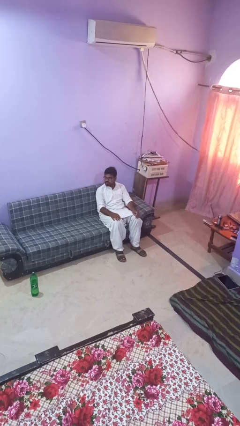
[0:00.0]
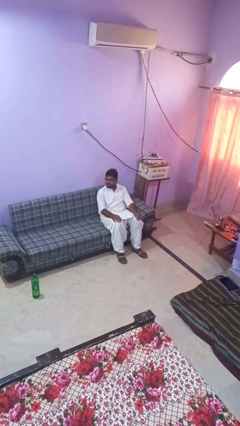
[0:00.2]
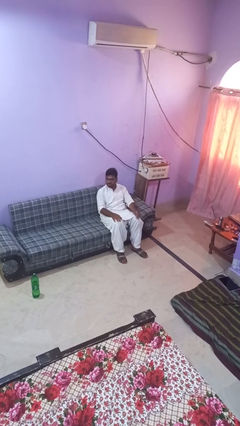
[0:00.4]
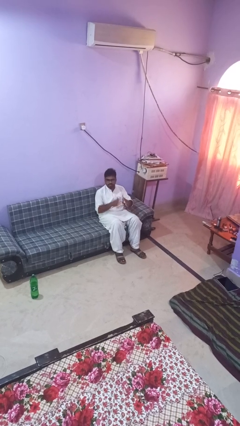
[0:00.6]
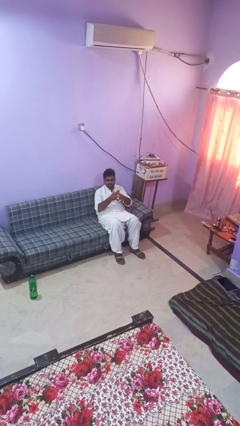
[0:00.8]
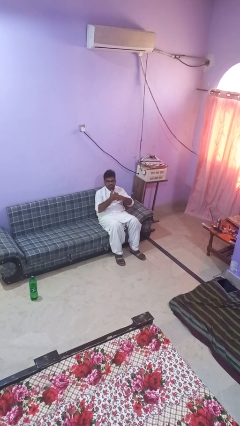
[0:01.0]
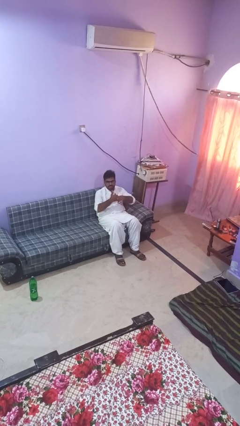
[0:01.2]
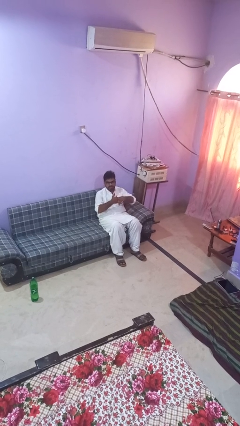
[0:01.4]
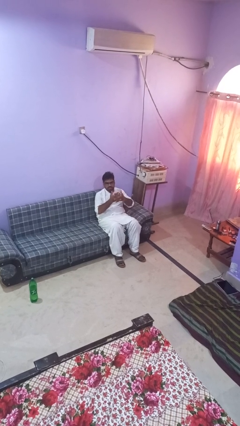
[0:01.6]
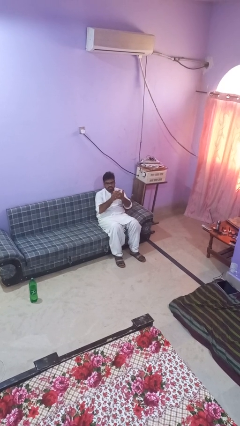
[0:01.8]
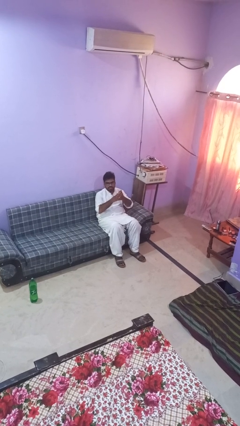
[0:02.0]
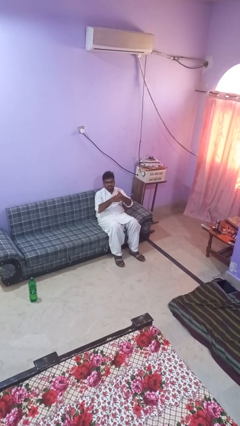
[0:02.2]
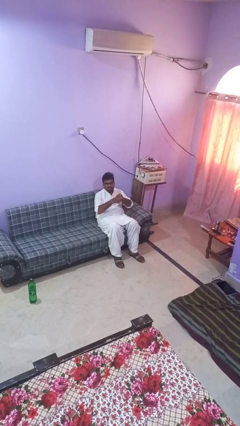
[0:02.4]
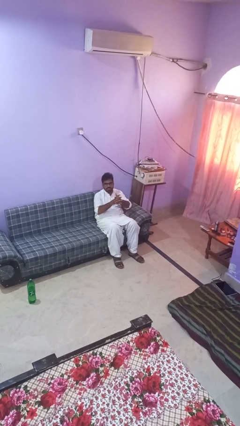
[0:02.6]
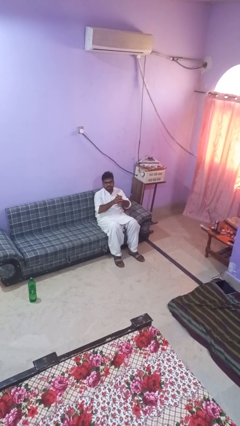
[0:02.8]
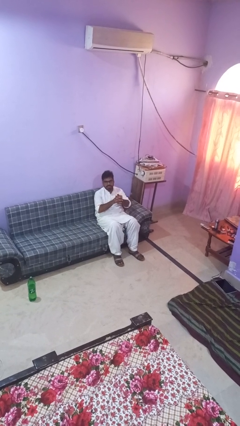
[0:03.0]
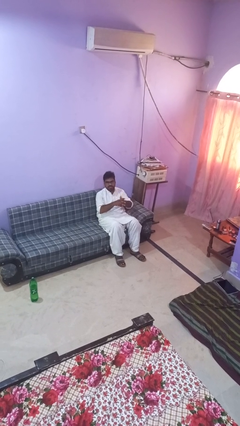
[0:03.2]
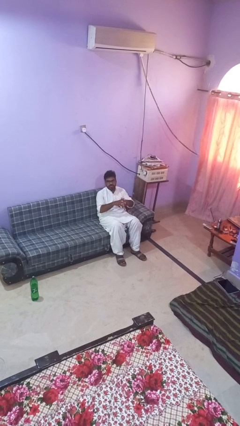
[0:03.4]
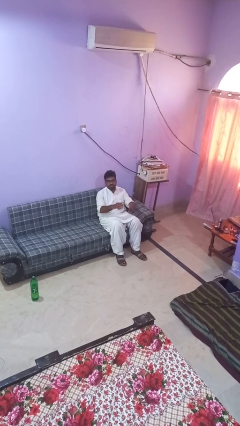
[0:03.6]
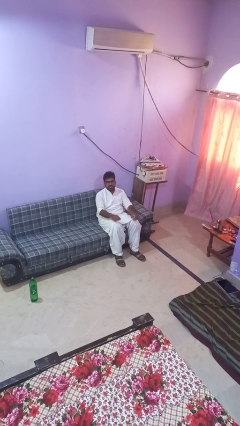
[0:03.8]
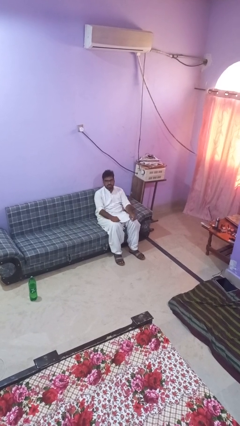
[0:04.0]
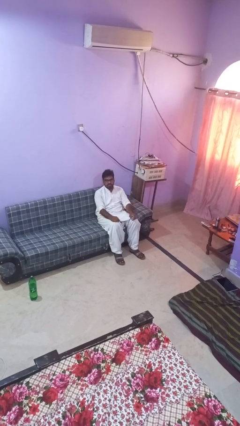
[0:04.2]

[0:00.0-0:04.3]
person cracks knuckles

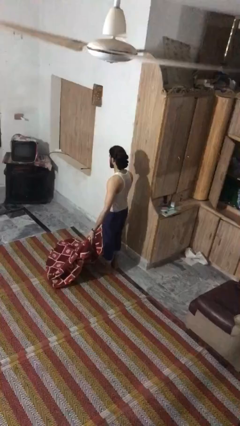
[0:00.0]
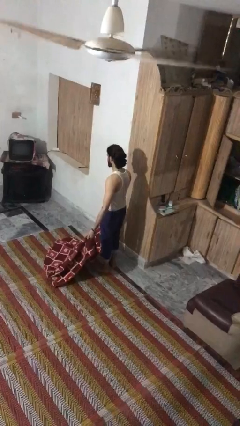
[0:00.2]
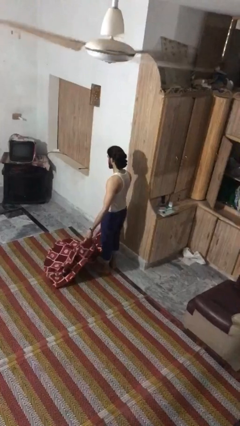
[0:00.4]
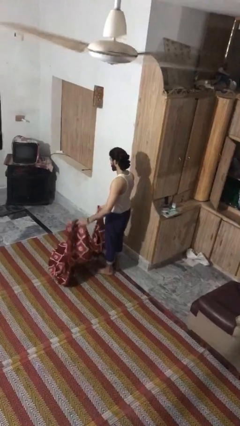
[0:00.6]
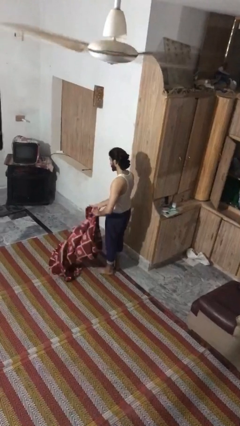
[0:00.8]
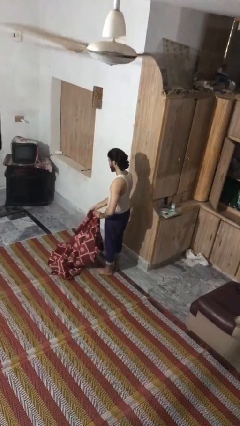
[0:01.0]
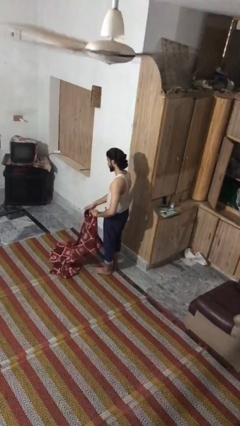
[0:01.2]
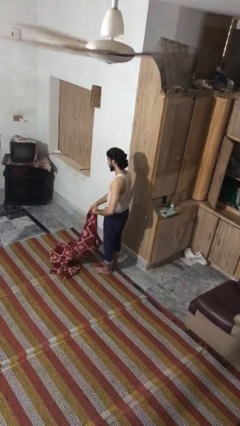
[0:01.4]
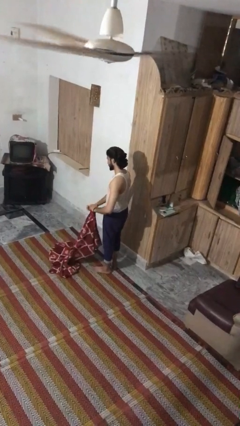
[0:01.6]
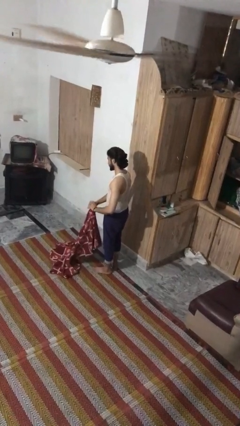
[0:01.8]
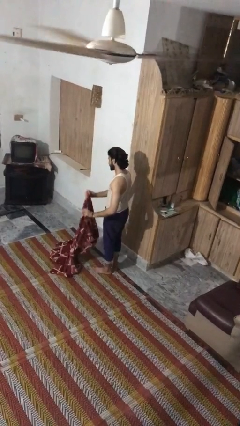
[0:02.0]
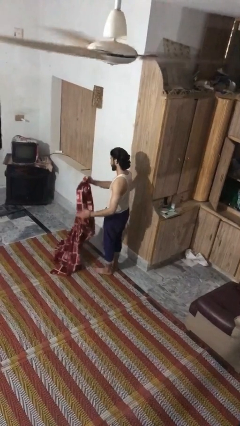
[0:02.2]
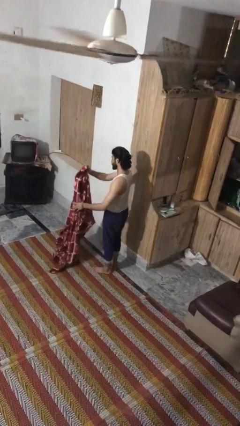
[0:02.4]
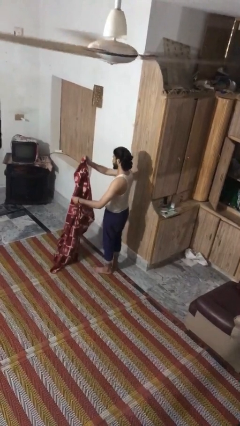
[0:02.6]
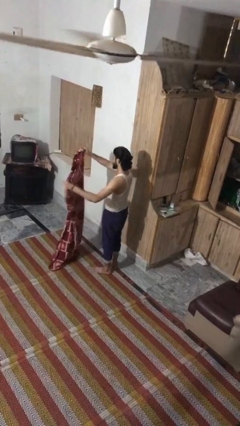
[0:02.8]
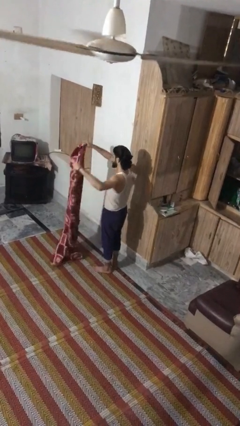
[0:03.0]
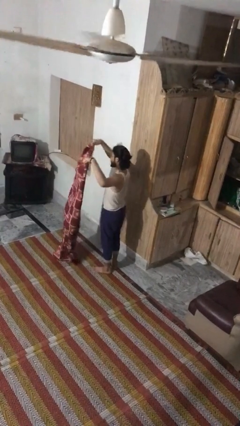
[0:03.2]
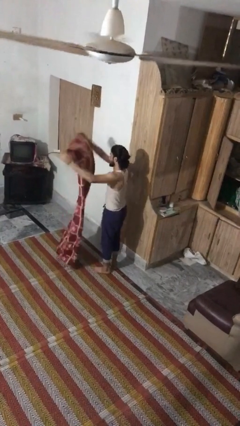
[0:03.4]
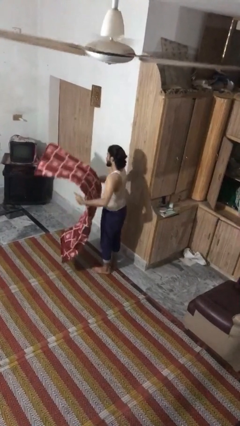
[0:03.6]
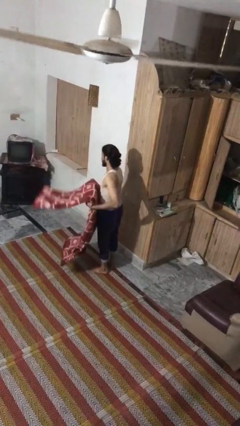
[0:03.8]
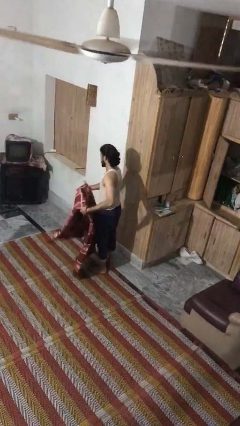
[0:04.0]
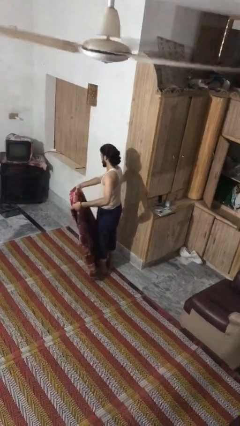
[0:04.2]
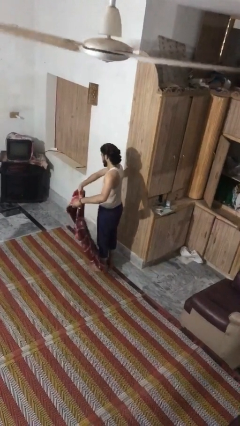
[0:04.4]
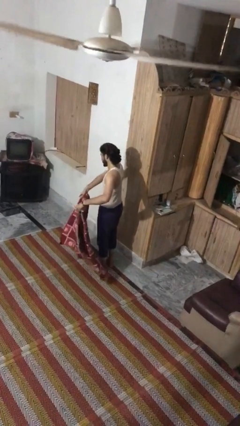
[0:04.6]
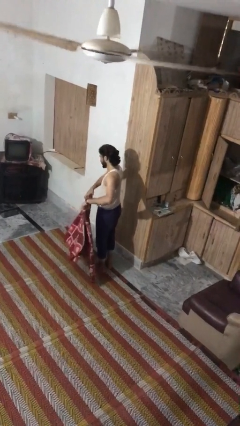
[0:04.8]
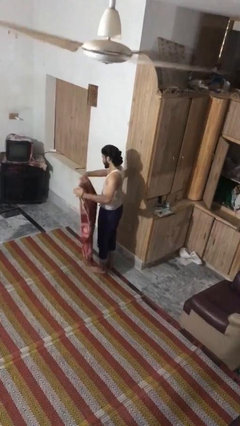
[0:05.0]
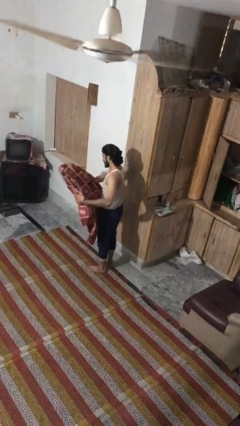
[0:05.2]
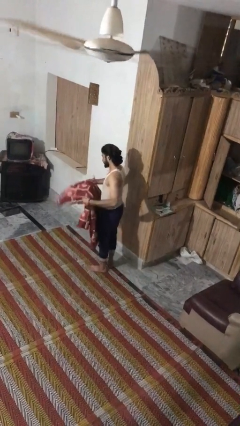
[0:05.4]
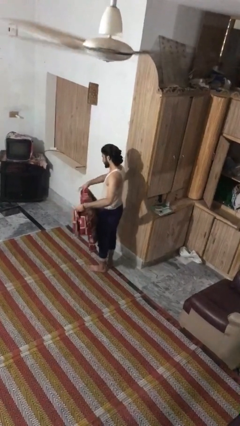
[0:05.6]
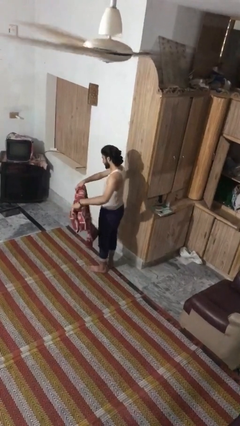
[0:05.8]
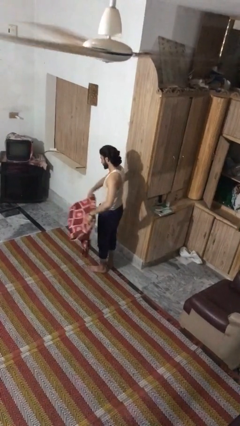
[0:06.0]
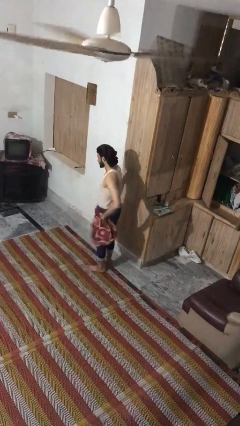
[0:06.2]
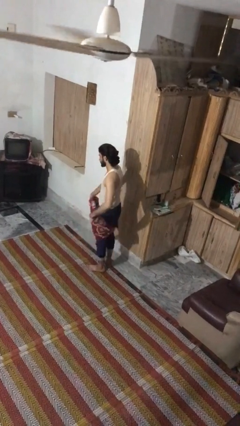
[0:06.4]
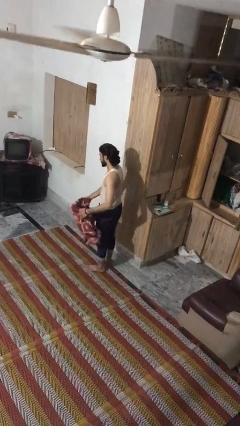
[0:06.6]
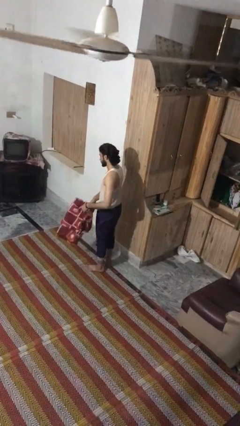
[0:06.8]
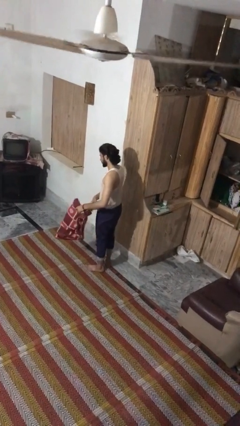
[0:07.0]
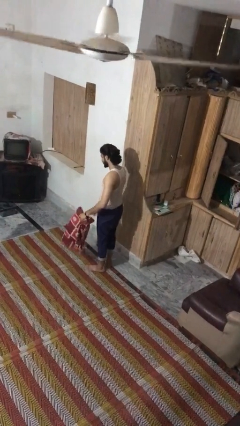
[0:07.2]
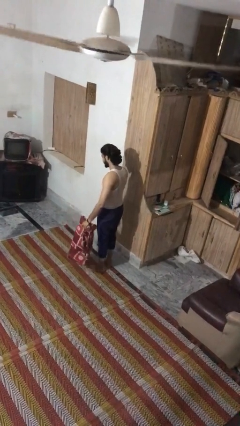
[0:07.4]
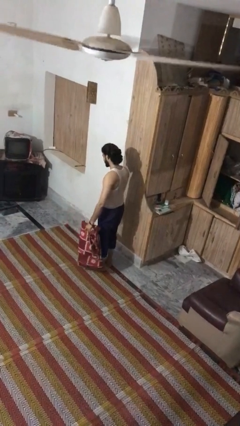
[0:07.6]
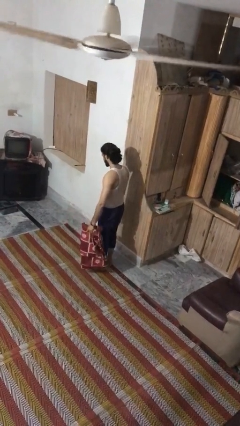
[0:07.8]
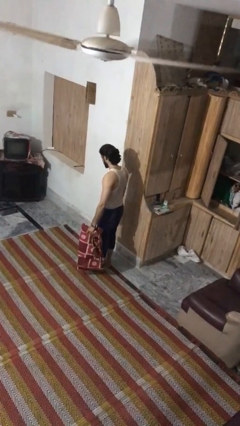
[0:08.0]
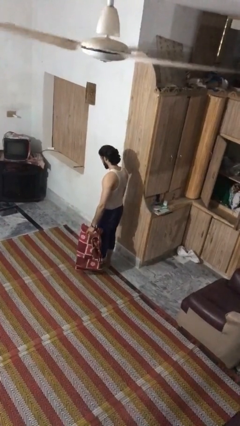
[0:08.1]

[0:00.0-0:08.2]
person folds blanket

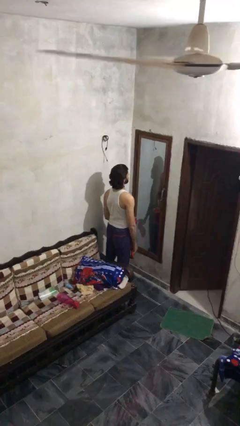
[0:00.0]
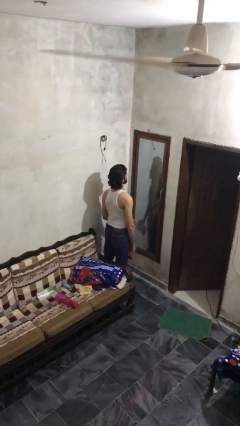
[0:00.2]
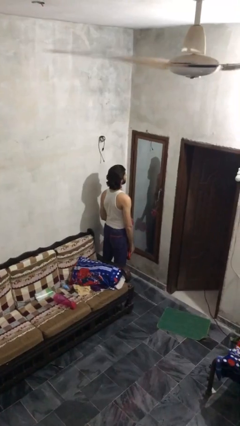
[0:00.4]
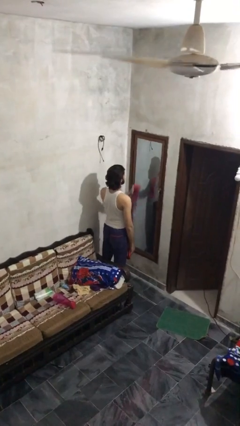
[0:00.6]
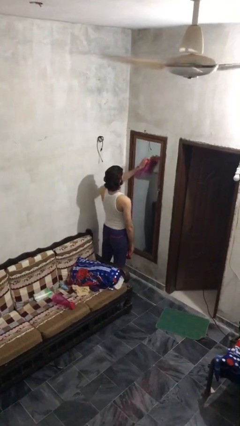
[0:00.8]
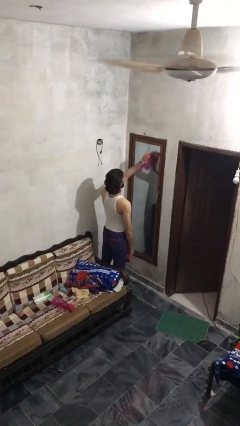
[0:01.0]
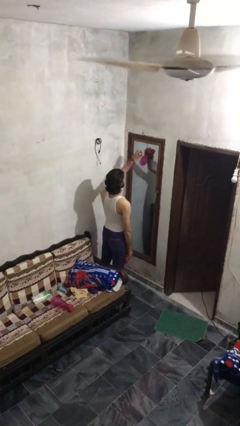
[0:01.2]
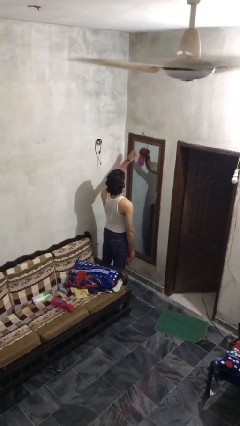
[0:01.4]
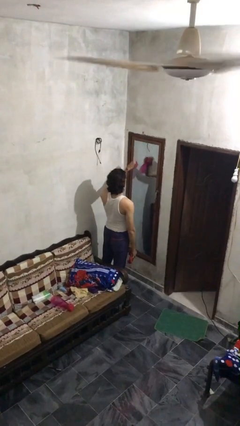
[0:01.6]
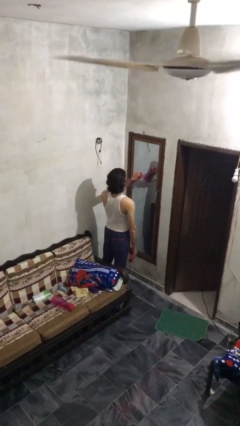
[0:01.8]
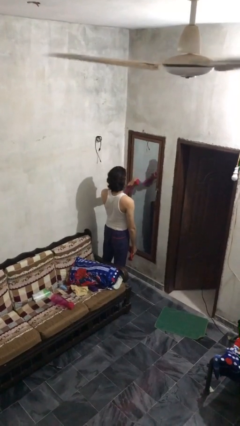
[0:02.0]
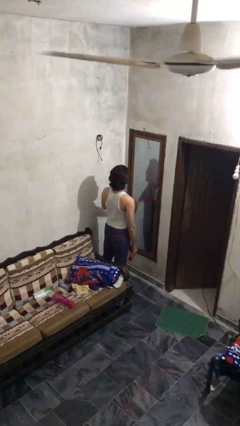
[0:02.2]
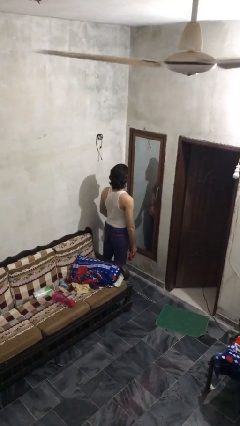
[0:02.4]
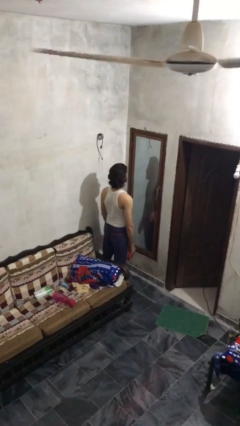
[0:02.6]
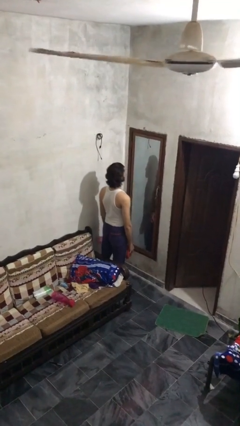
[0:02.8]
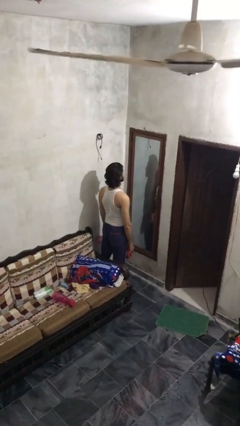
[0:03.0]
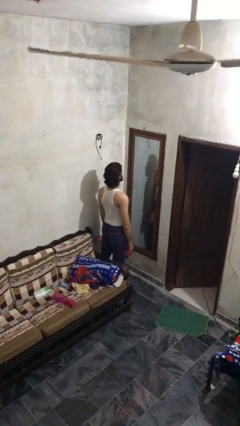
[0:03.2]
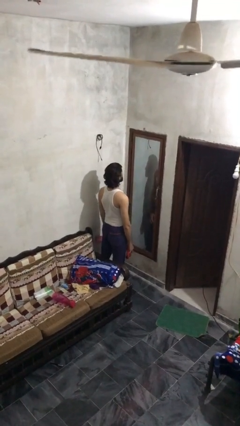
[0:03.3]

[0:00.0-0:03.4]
person sprays from bottle

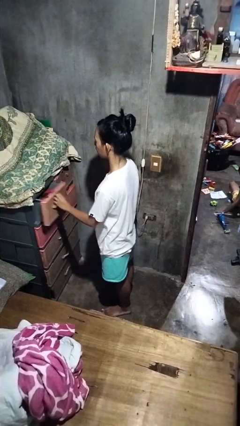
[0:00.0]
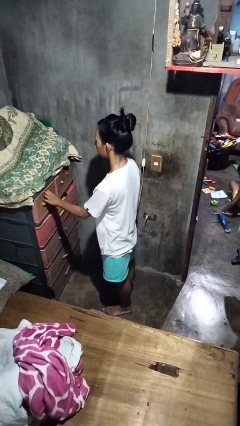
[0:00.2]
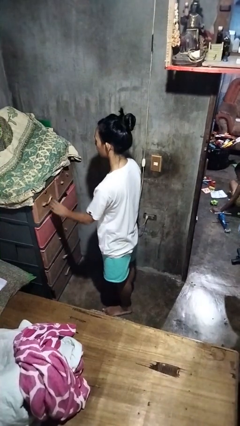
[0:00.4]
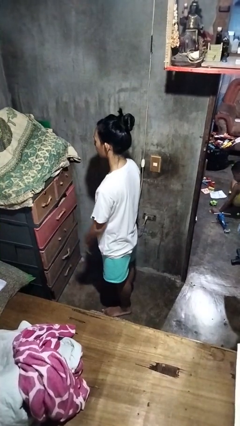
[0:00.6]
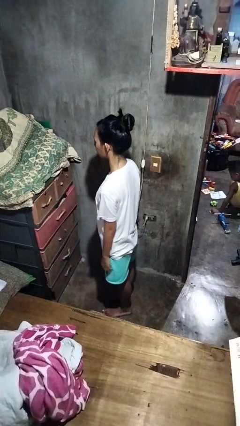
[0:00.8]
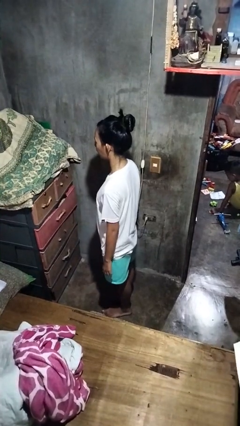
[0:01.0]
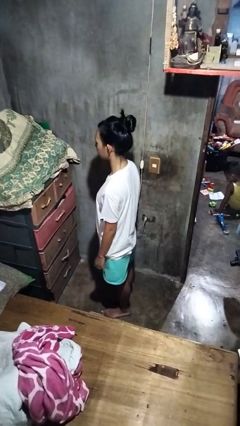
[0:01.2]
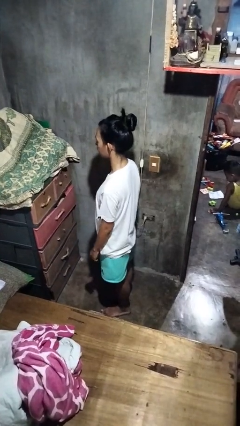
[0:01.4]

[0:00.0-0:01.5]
person closes dresser drawer
